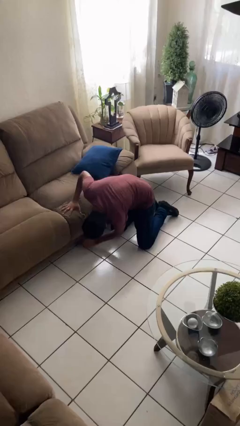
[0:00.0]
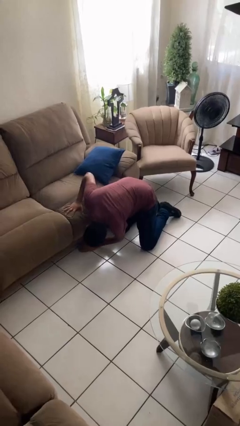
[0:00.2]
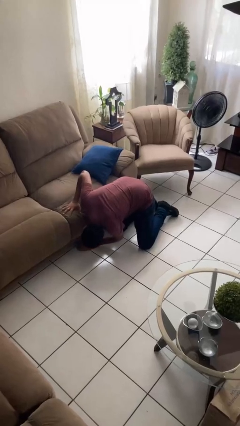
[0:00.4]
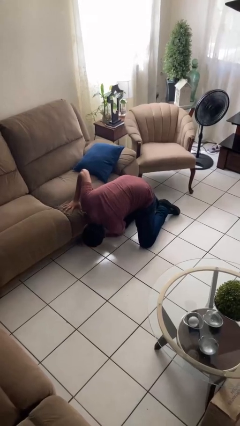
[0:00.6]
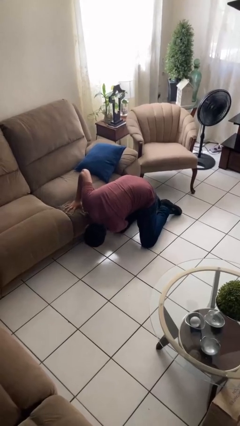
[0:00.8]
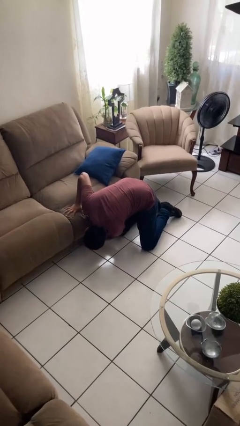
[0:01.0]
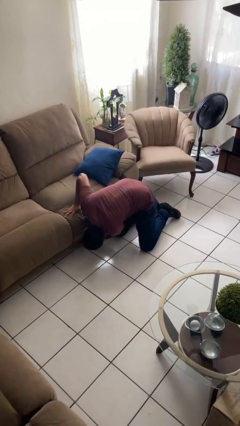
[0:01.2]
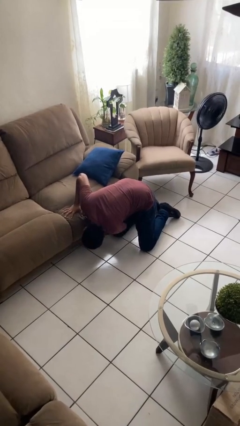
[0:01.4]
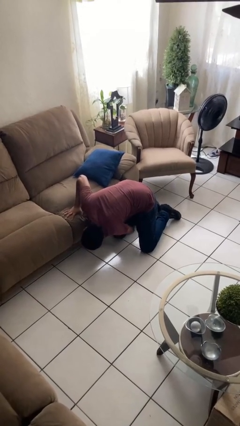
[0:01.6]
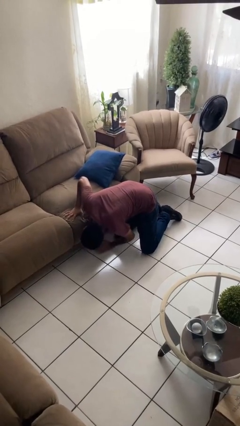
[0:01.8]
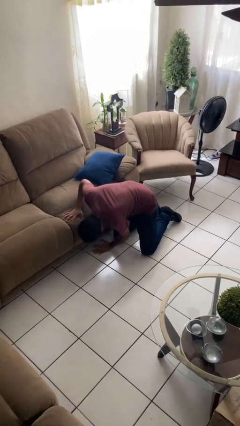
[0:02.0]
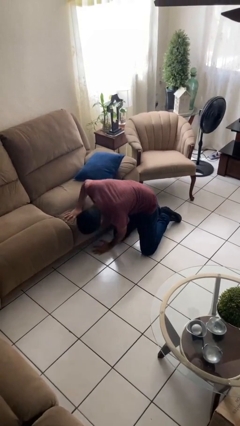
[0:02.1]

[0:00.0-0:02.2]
person searches under couch

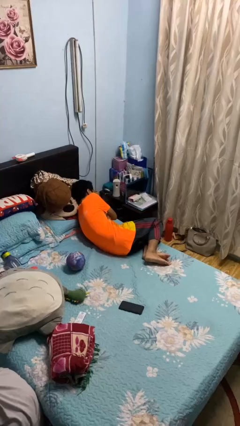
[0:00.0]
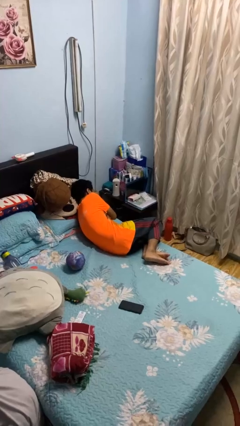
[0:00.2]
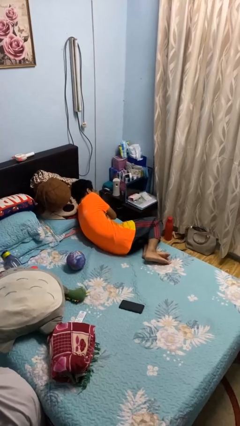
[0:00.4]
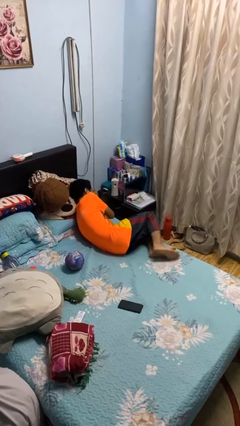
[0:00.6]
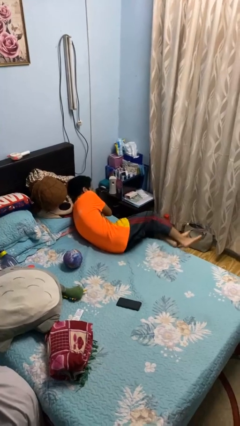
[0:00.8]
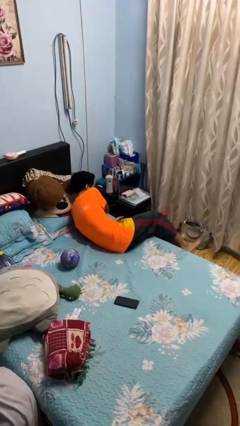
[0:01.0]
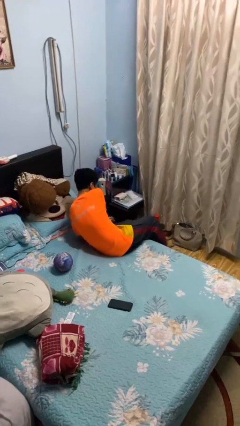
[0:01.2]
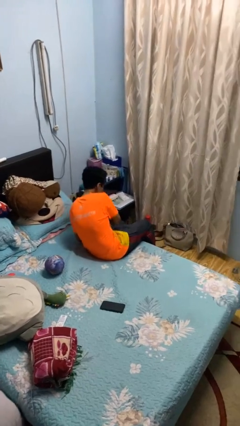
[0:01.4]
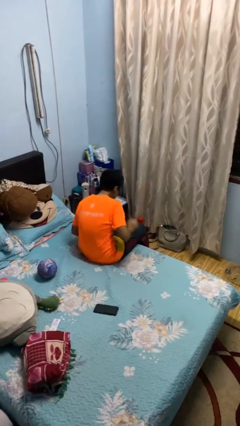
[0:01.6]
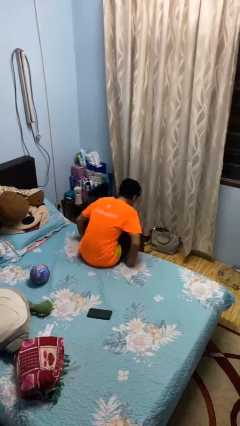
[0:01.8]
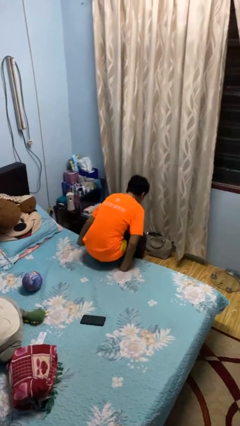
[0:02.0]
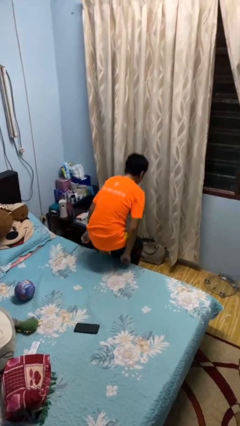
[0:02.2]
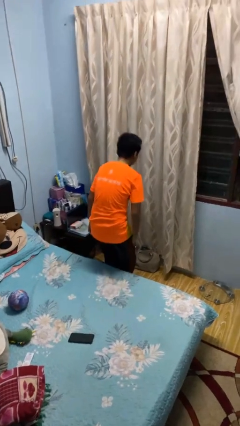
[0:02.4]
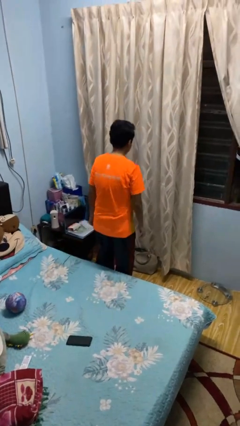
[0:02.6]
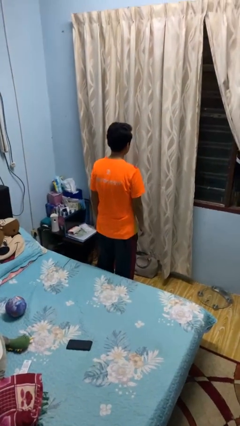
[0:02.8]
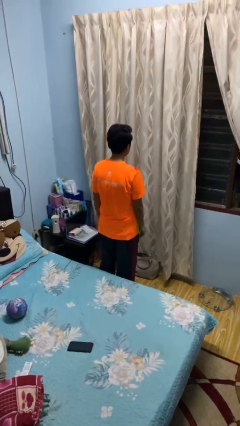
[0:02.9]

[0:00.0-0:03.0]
person stands up

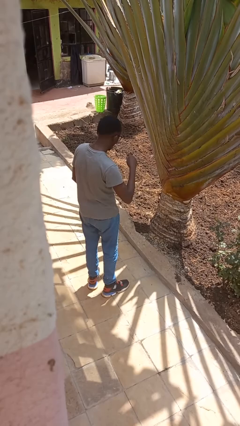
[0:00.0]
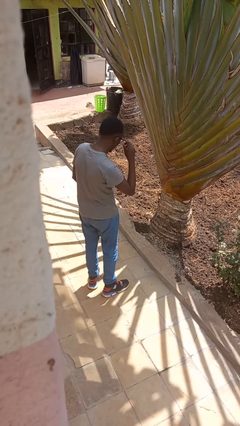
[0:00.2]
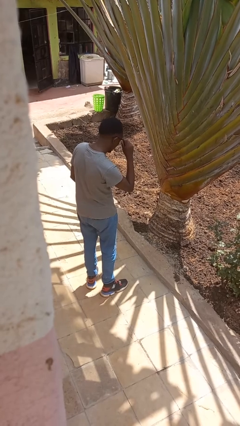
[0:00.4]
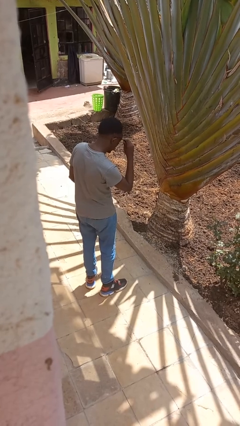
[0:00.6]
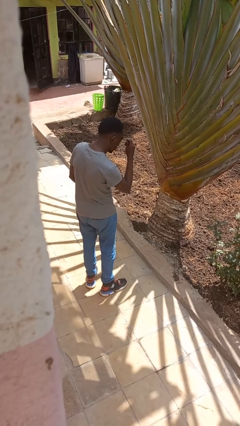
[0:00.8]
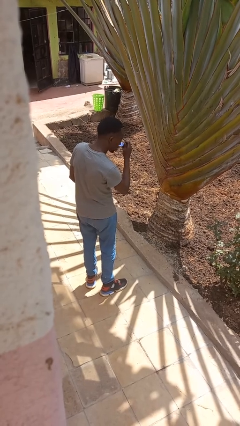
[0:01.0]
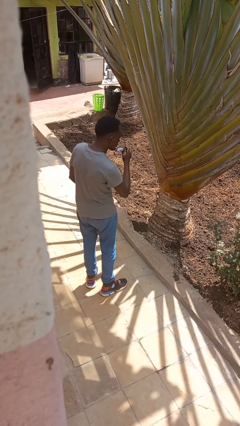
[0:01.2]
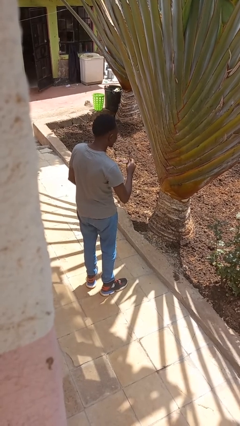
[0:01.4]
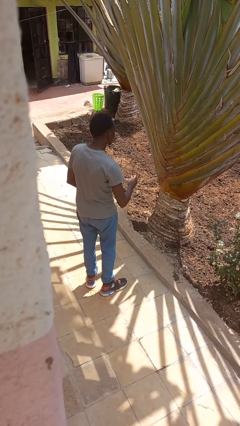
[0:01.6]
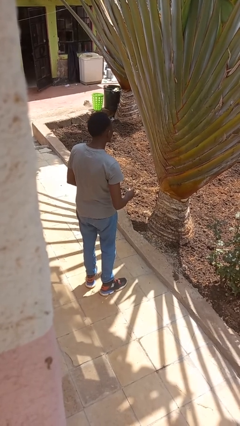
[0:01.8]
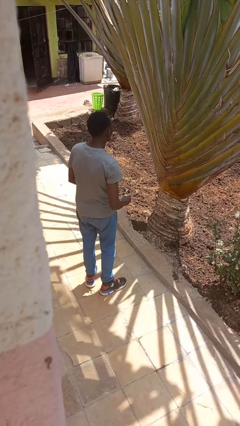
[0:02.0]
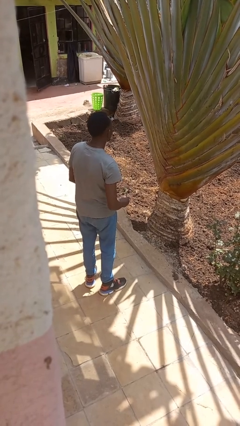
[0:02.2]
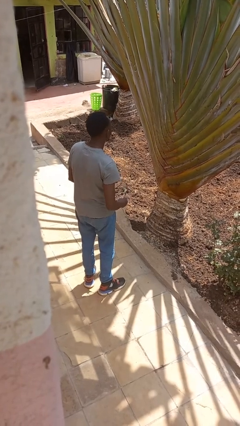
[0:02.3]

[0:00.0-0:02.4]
person takes off glasses

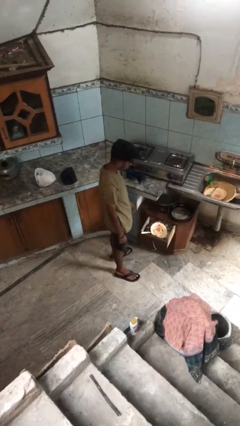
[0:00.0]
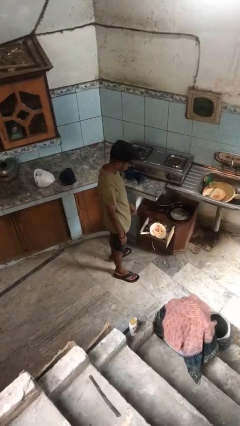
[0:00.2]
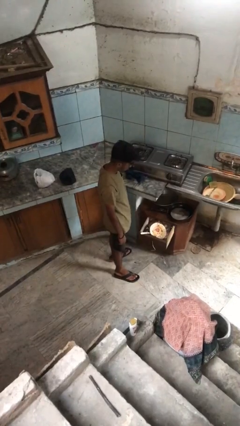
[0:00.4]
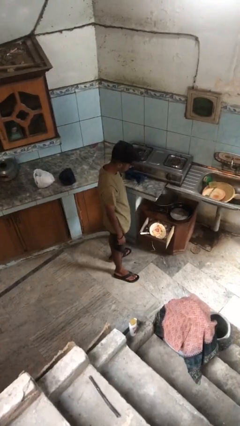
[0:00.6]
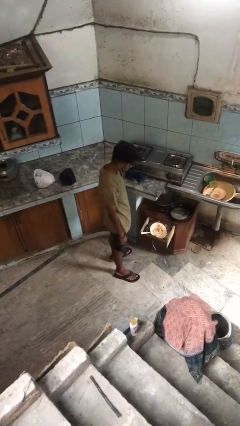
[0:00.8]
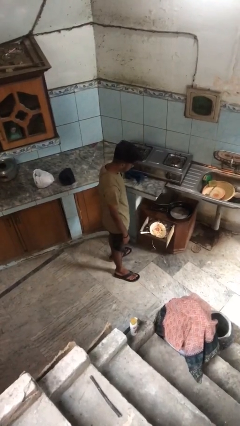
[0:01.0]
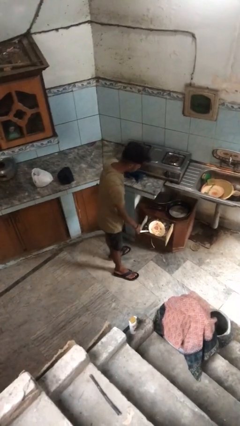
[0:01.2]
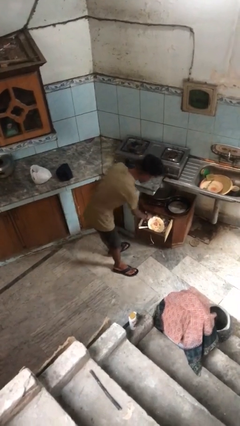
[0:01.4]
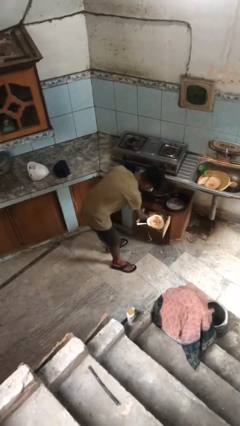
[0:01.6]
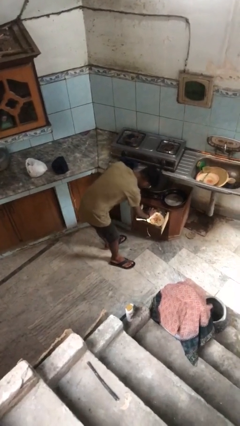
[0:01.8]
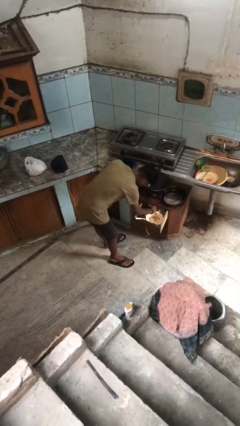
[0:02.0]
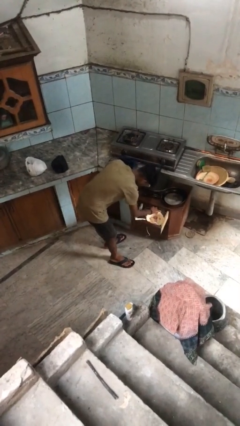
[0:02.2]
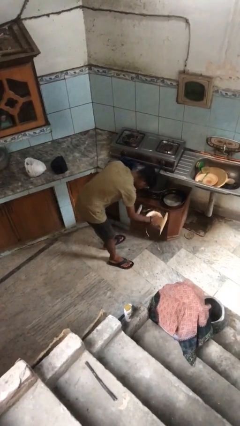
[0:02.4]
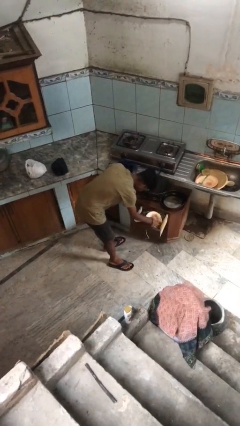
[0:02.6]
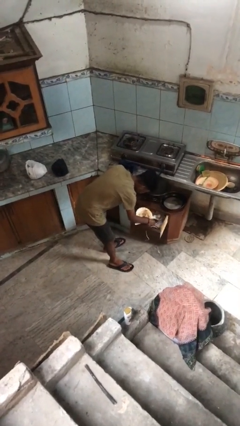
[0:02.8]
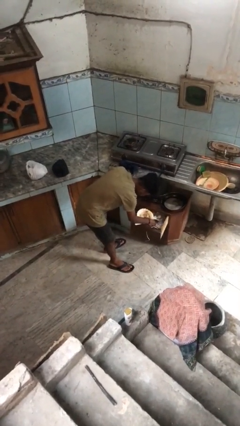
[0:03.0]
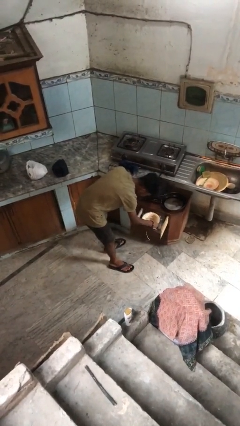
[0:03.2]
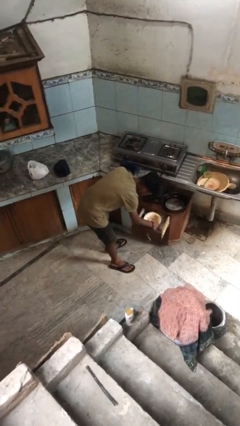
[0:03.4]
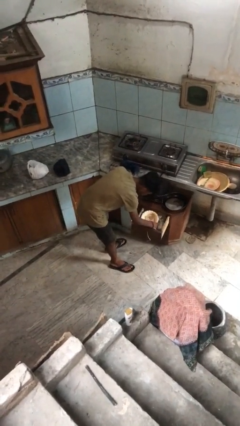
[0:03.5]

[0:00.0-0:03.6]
person searches in kitchen drawer

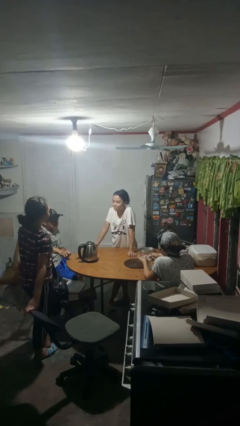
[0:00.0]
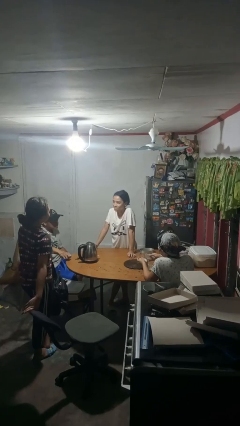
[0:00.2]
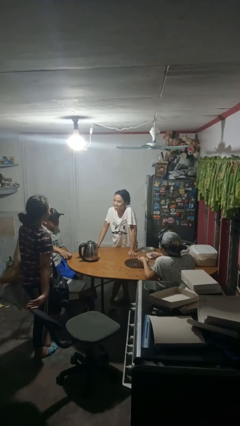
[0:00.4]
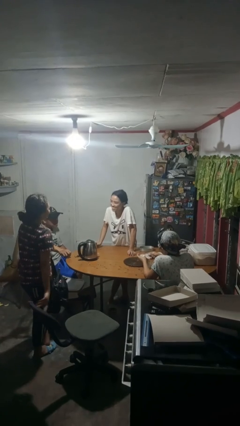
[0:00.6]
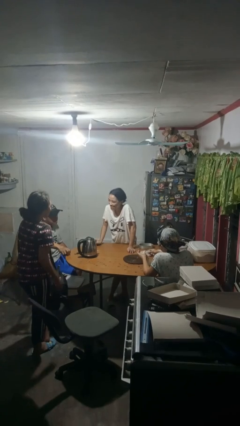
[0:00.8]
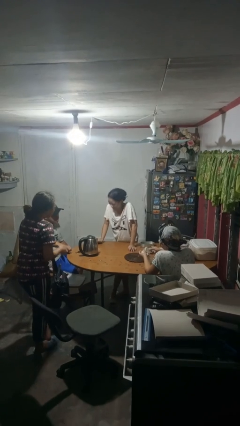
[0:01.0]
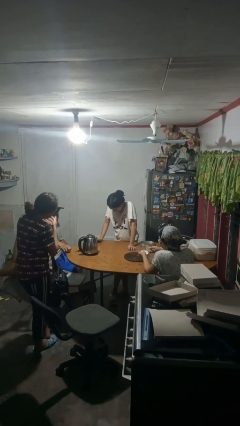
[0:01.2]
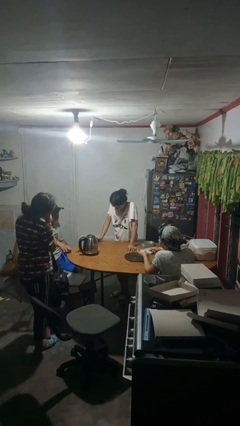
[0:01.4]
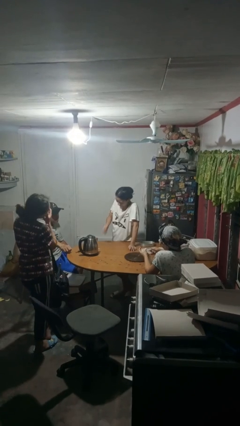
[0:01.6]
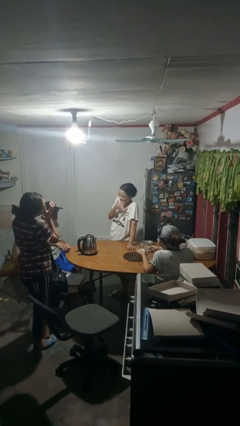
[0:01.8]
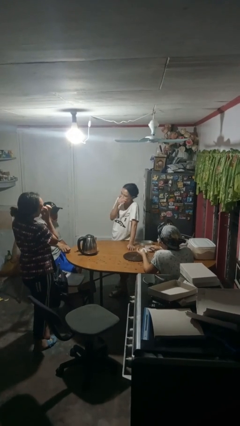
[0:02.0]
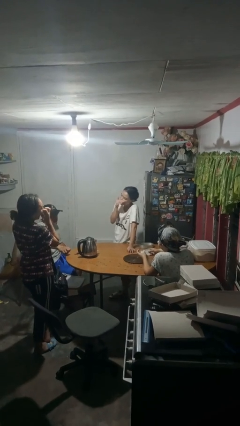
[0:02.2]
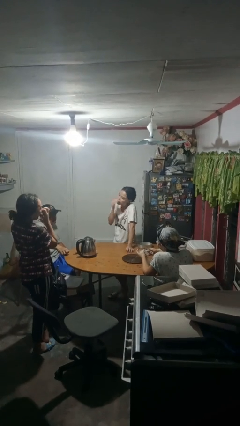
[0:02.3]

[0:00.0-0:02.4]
person laughs with person

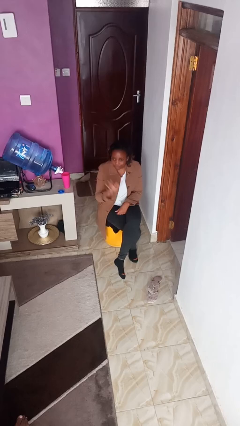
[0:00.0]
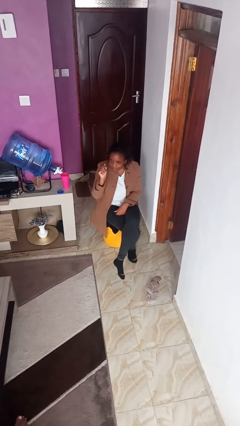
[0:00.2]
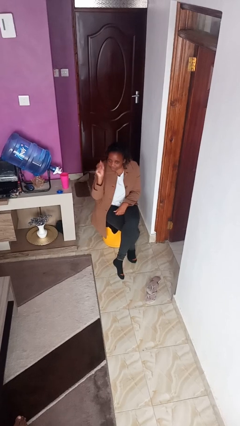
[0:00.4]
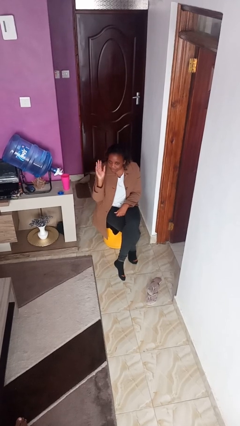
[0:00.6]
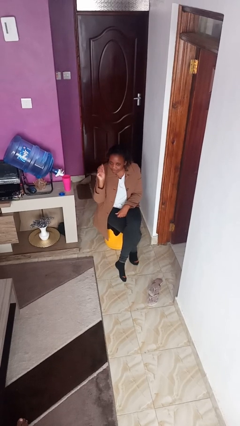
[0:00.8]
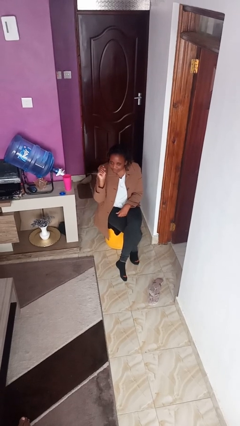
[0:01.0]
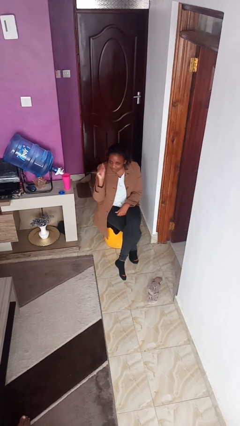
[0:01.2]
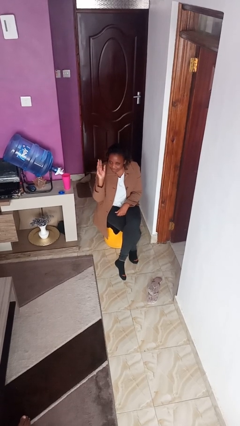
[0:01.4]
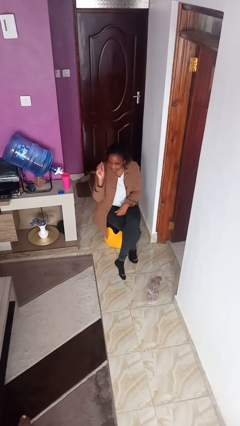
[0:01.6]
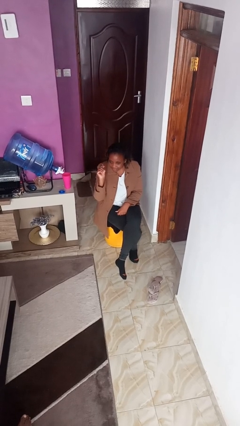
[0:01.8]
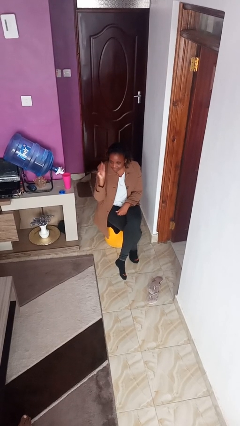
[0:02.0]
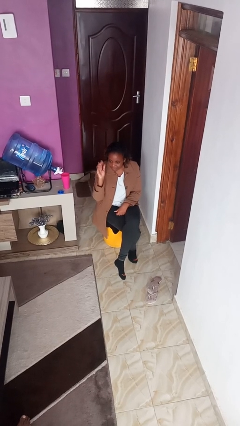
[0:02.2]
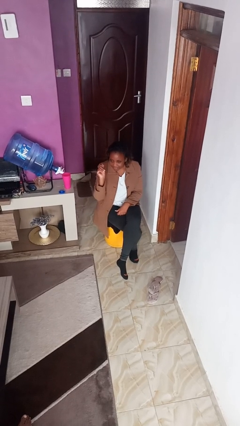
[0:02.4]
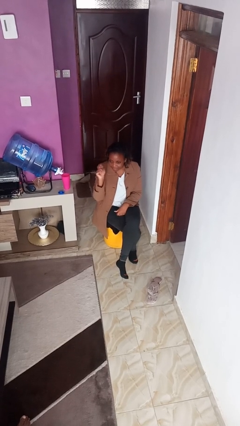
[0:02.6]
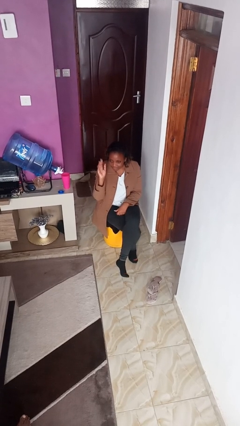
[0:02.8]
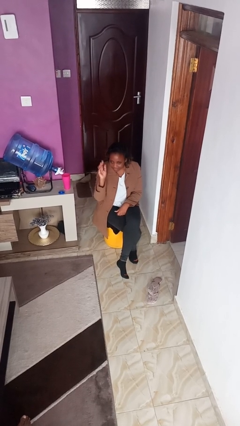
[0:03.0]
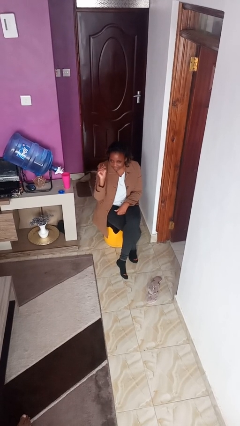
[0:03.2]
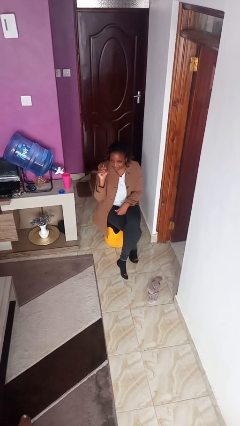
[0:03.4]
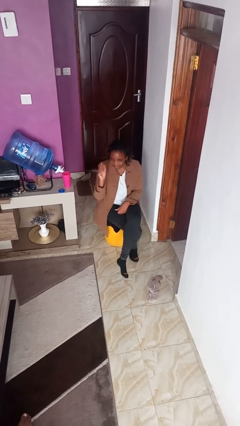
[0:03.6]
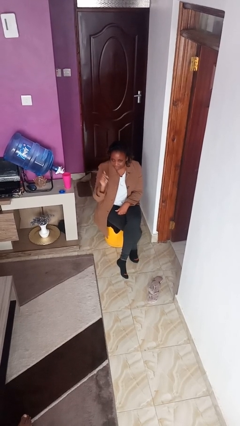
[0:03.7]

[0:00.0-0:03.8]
person gestures come here

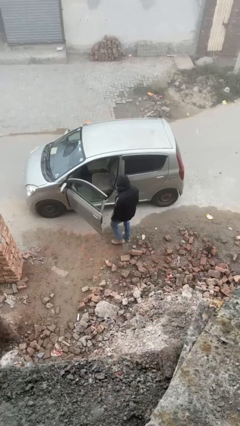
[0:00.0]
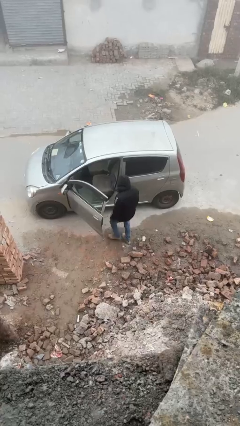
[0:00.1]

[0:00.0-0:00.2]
person enters car
